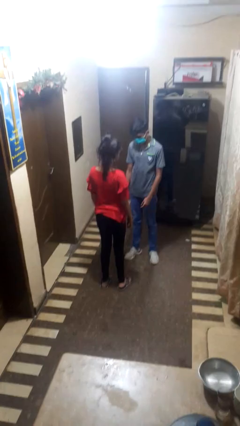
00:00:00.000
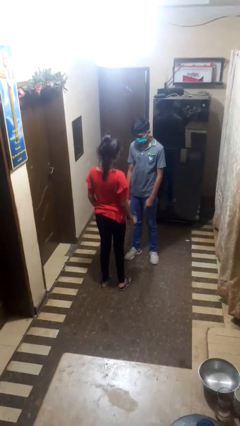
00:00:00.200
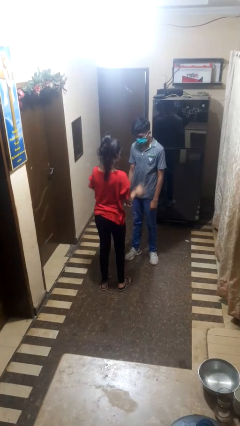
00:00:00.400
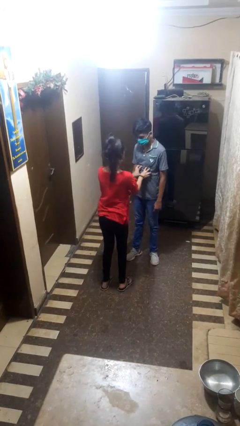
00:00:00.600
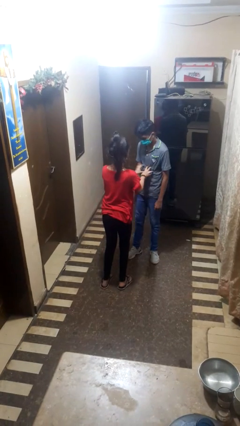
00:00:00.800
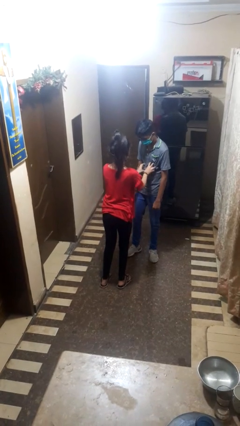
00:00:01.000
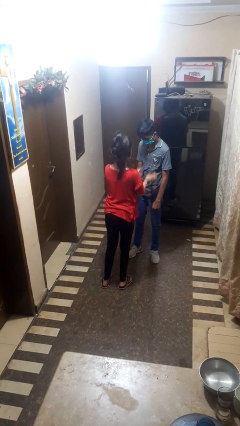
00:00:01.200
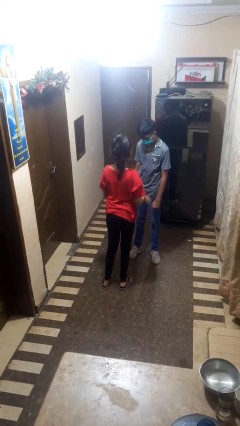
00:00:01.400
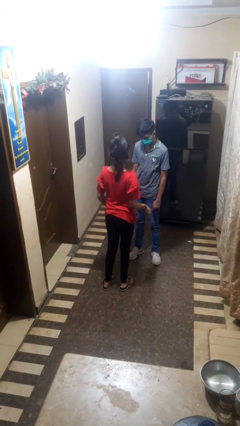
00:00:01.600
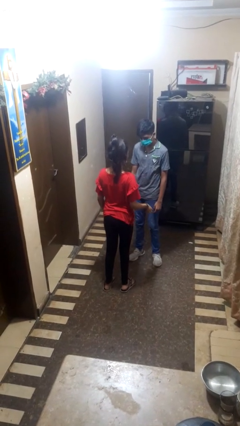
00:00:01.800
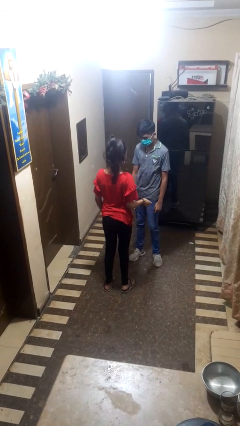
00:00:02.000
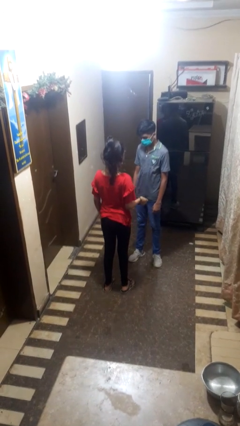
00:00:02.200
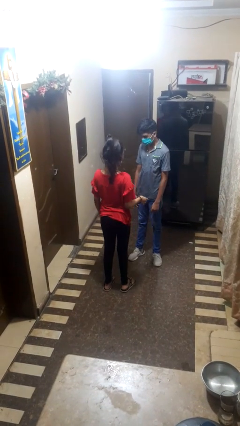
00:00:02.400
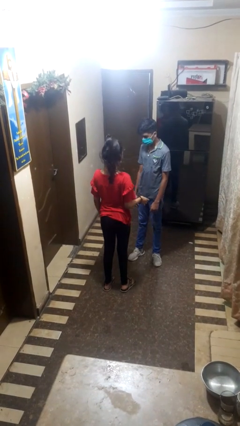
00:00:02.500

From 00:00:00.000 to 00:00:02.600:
person tickles person

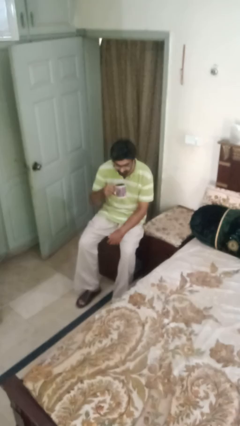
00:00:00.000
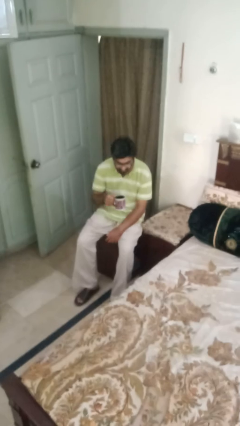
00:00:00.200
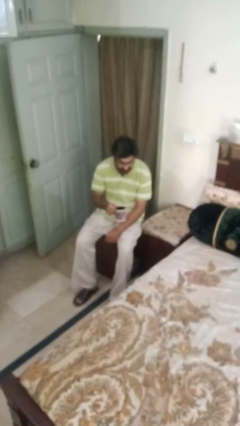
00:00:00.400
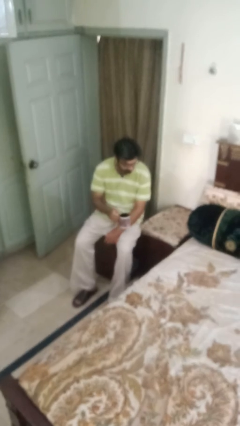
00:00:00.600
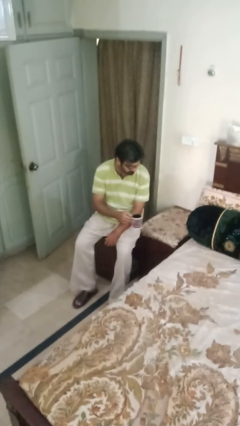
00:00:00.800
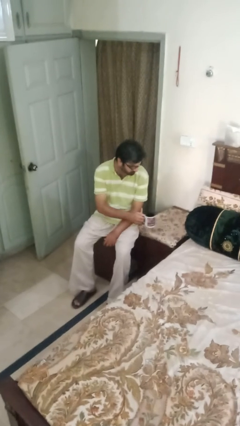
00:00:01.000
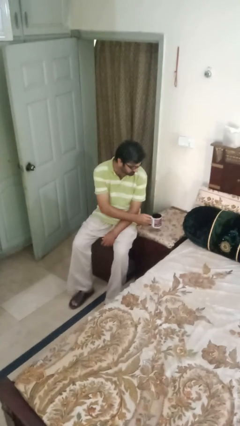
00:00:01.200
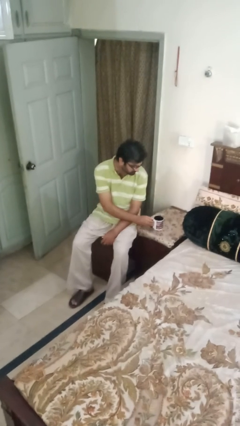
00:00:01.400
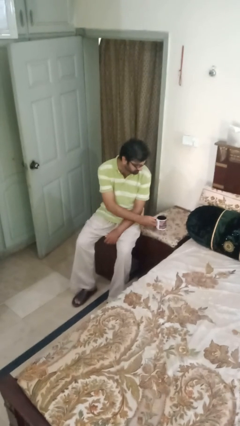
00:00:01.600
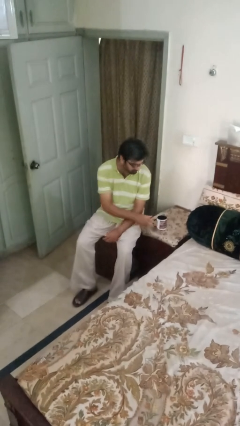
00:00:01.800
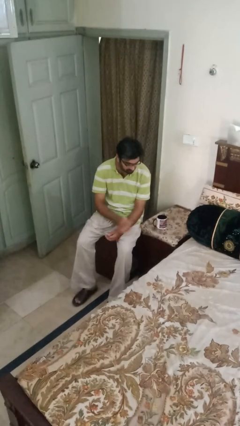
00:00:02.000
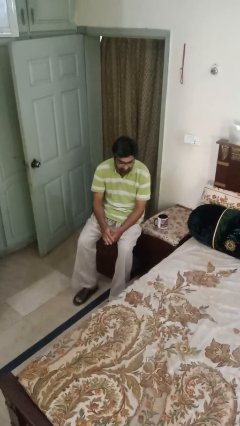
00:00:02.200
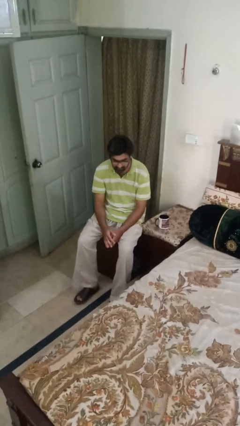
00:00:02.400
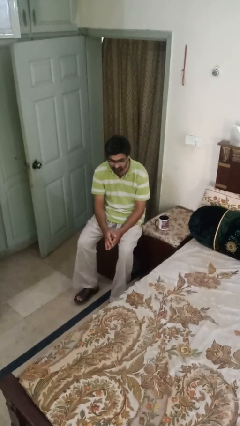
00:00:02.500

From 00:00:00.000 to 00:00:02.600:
person puts down object on table

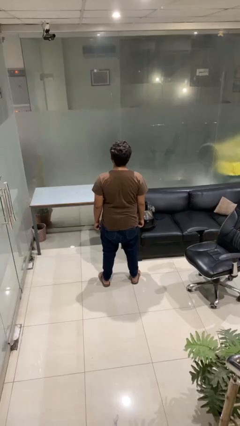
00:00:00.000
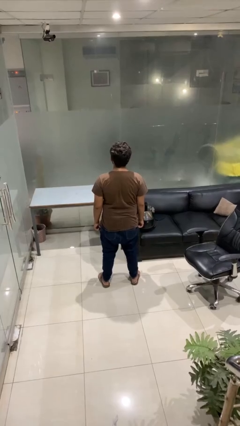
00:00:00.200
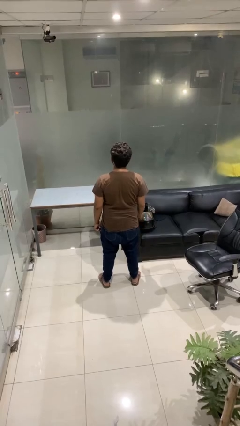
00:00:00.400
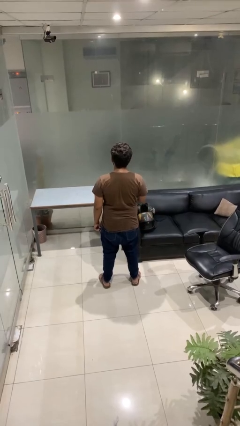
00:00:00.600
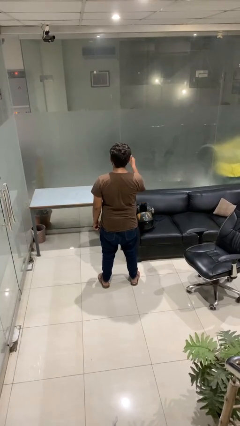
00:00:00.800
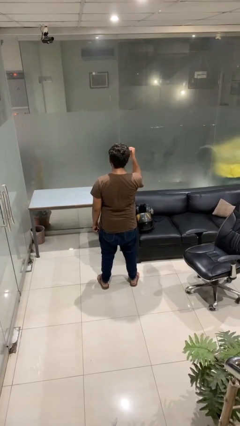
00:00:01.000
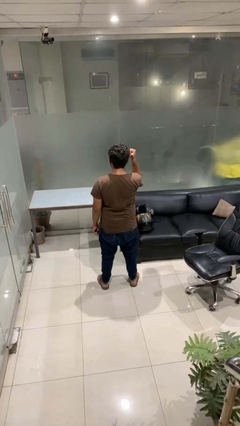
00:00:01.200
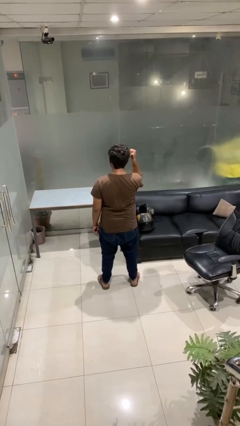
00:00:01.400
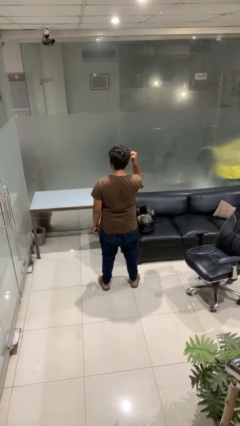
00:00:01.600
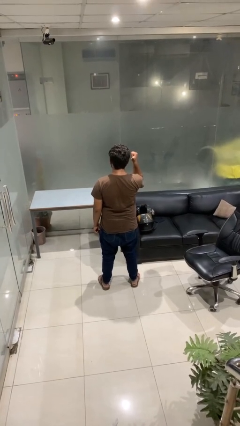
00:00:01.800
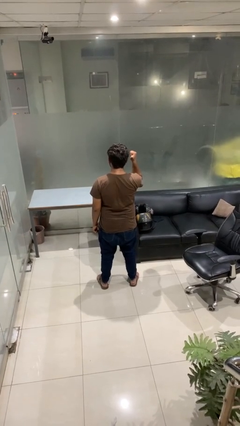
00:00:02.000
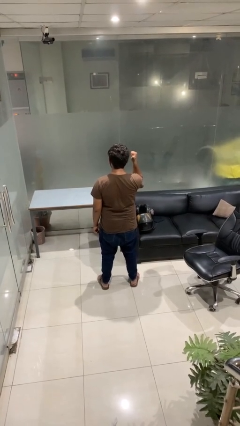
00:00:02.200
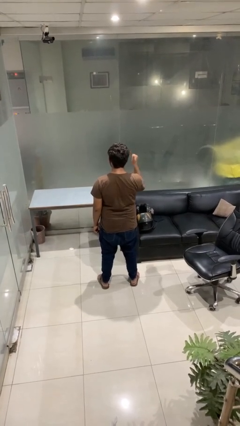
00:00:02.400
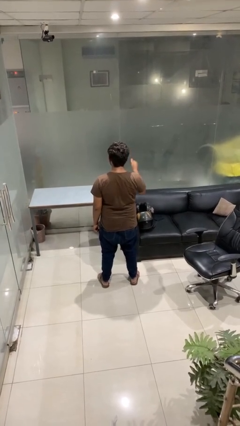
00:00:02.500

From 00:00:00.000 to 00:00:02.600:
person gestures behind me

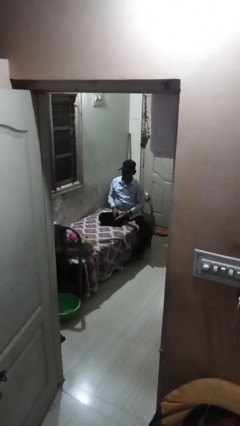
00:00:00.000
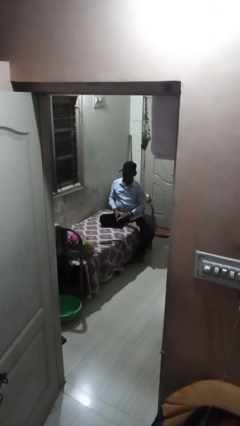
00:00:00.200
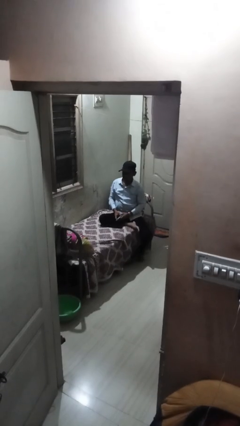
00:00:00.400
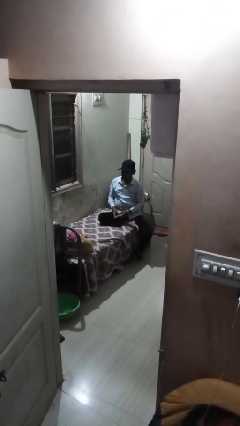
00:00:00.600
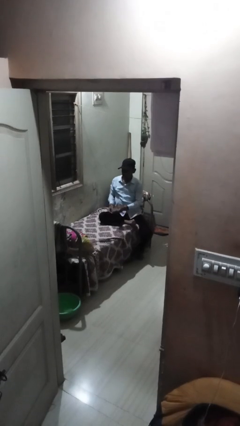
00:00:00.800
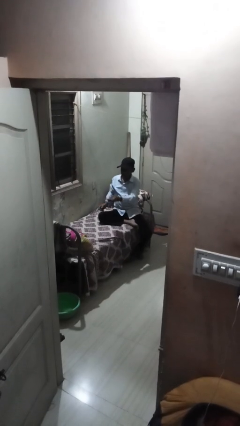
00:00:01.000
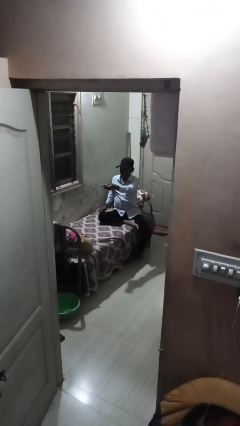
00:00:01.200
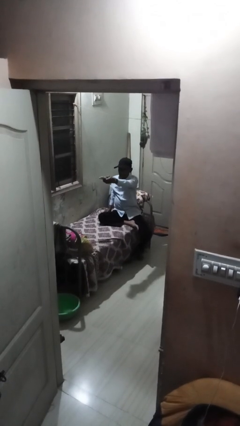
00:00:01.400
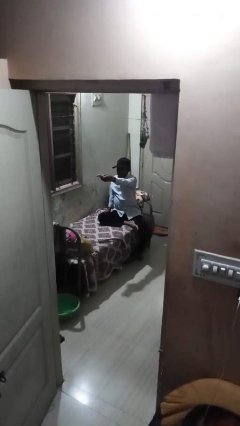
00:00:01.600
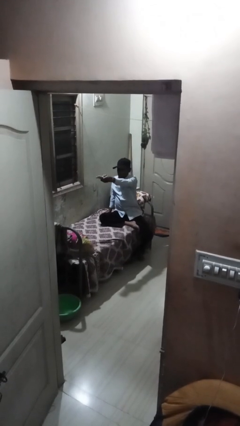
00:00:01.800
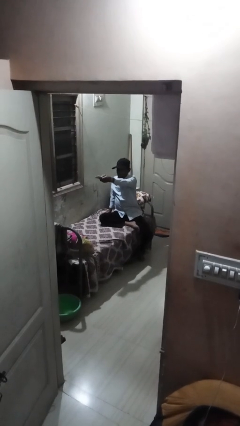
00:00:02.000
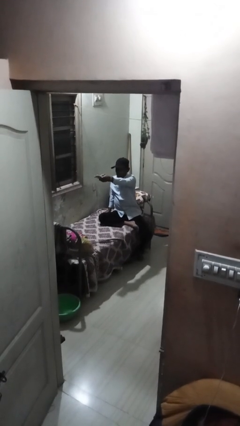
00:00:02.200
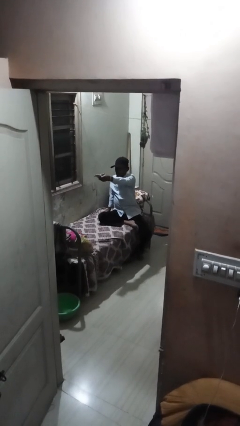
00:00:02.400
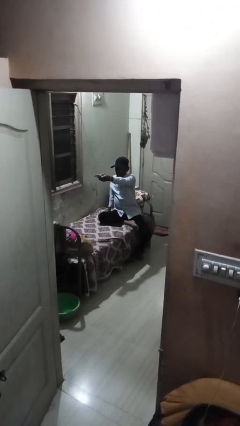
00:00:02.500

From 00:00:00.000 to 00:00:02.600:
person uses television remote

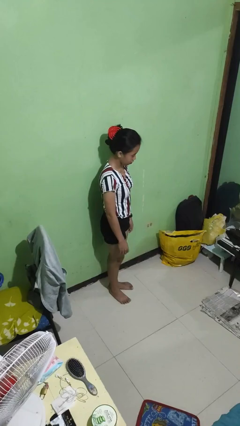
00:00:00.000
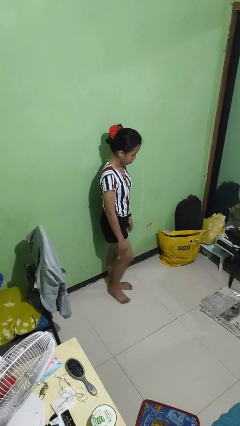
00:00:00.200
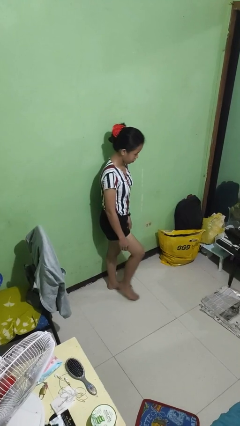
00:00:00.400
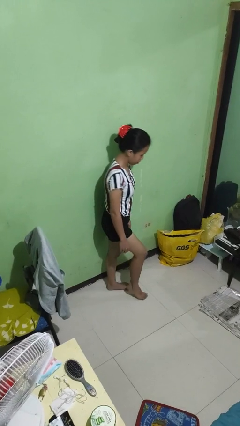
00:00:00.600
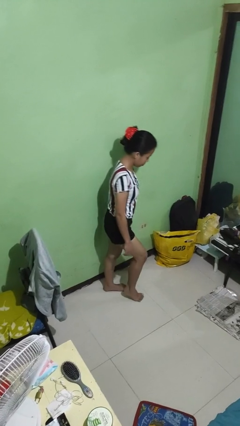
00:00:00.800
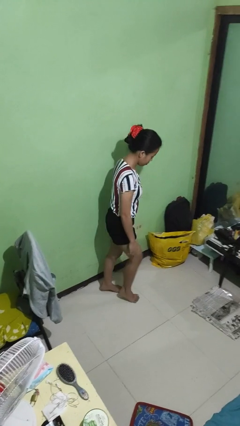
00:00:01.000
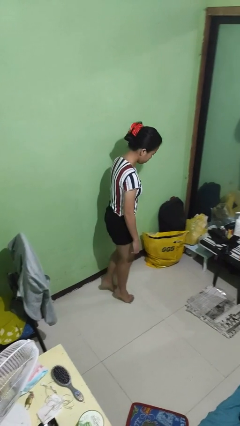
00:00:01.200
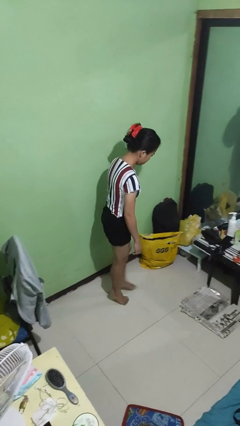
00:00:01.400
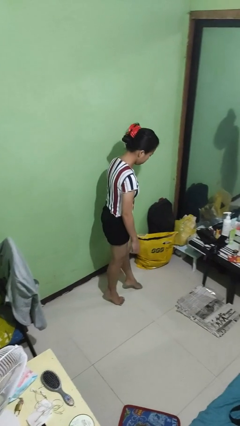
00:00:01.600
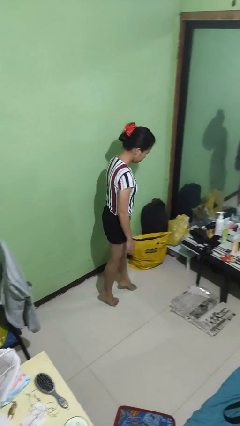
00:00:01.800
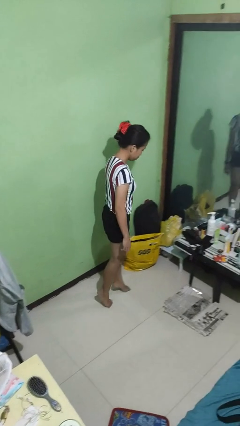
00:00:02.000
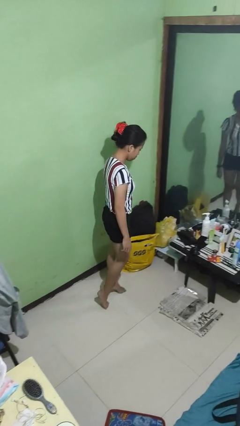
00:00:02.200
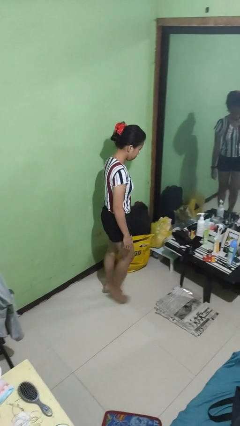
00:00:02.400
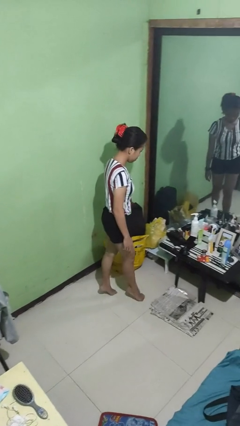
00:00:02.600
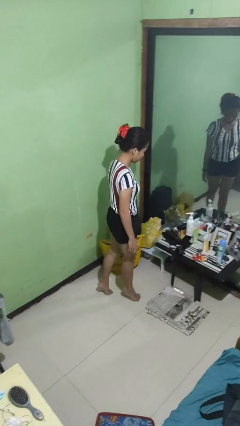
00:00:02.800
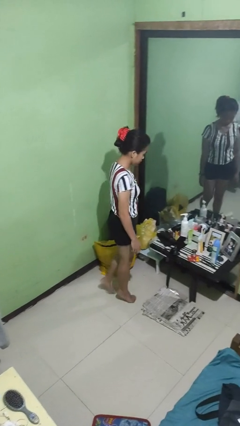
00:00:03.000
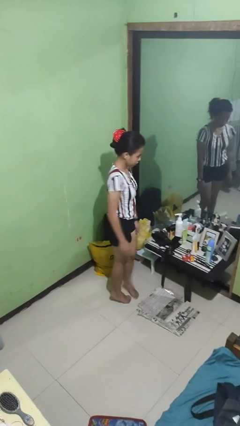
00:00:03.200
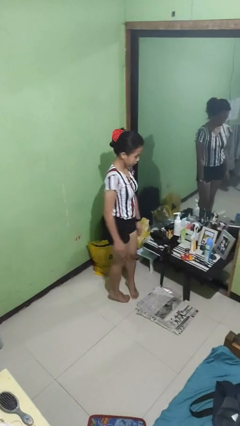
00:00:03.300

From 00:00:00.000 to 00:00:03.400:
person walks tiptoe

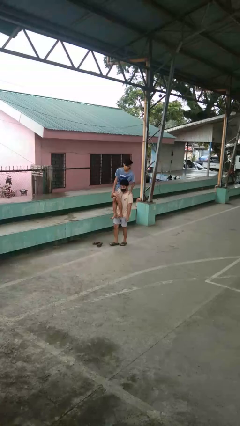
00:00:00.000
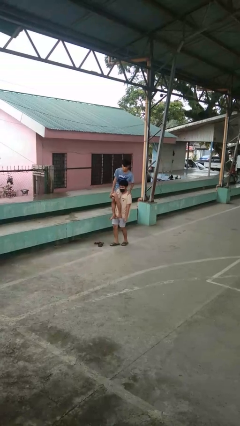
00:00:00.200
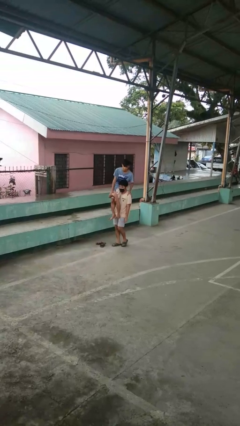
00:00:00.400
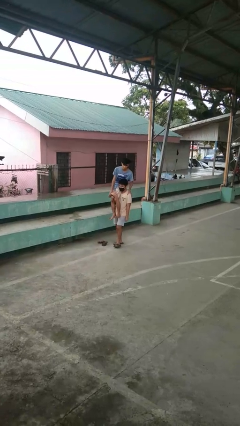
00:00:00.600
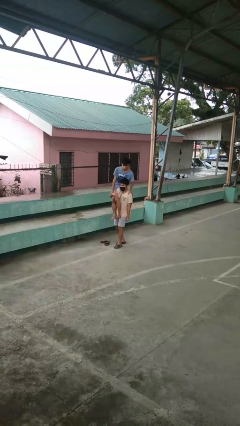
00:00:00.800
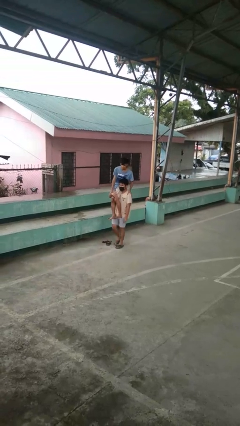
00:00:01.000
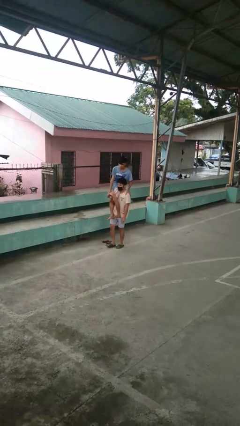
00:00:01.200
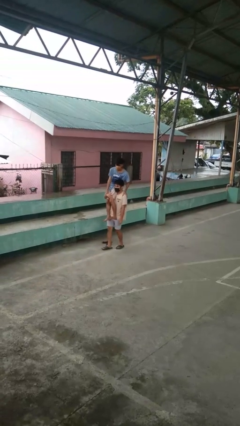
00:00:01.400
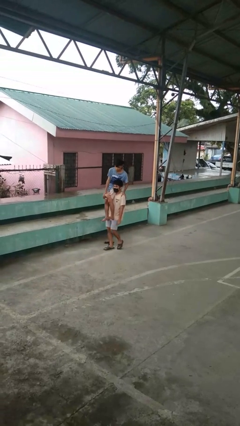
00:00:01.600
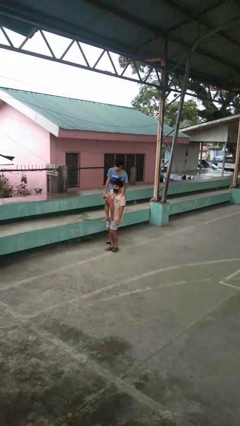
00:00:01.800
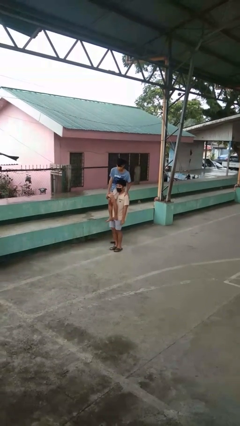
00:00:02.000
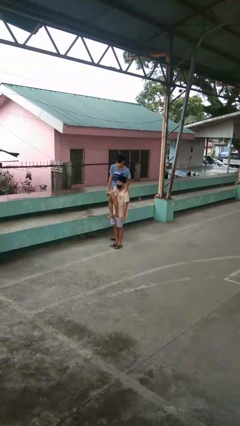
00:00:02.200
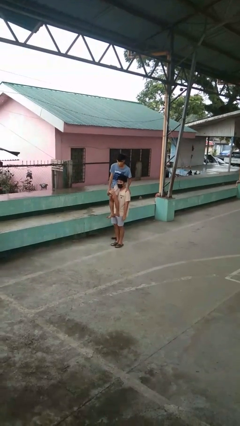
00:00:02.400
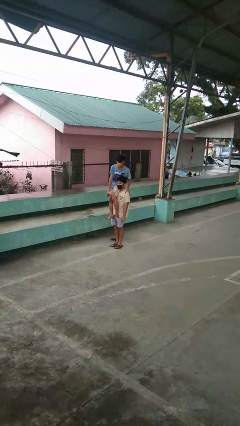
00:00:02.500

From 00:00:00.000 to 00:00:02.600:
person carries person on shoulders

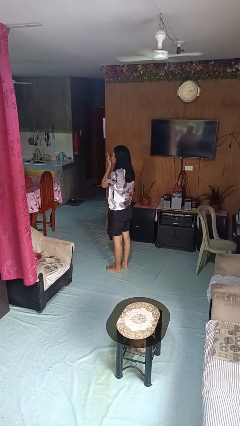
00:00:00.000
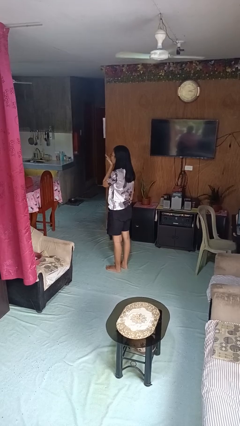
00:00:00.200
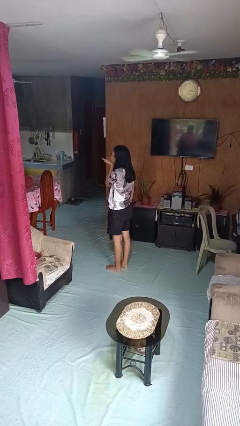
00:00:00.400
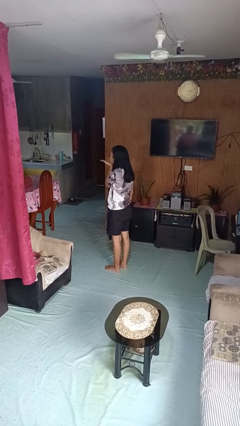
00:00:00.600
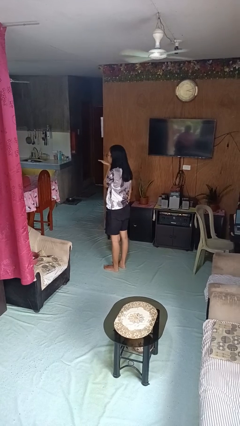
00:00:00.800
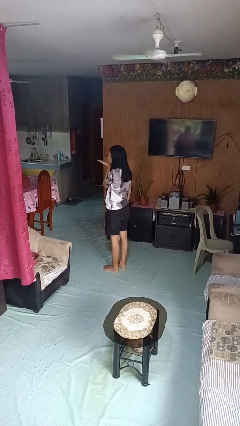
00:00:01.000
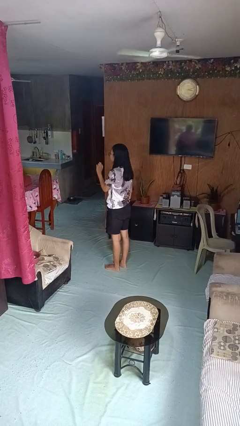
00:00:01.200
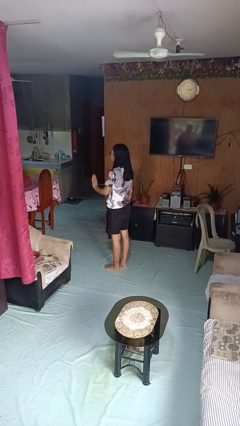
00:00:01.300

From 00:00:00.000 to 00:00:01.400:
person gestures blow kiss
